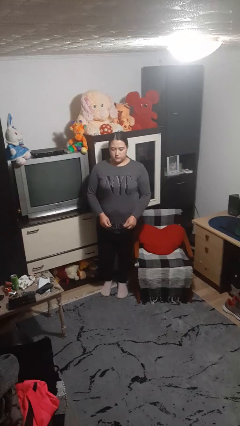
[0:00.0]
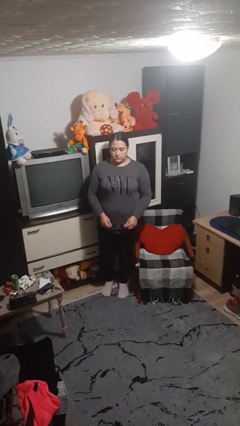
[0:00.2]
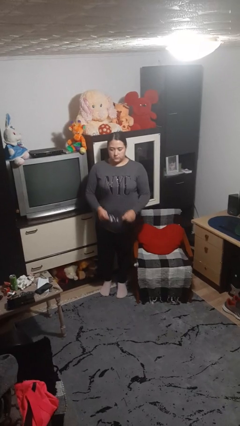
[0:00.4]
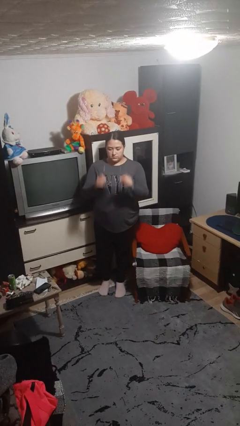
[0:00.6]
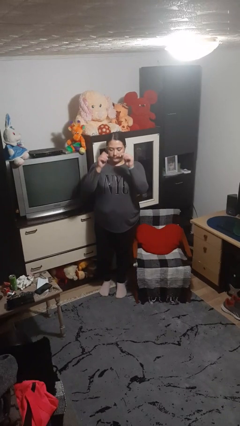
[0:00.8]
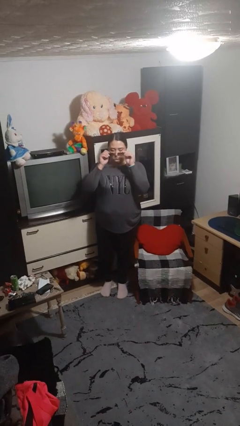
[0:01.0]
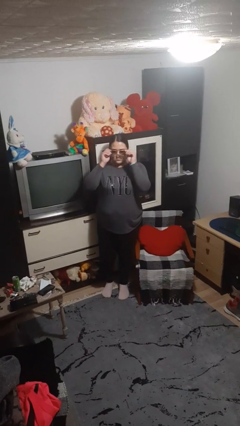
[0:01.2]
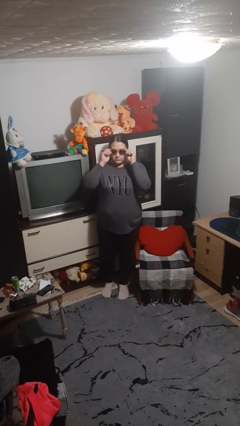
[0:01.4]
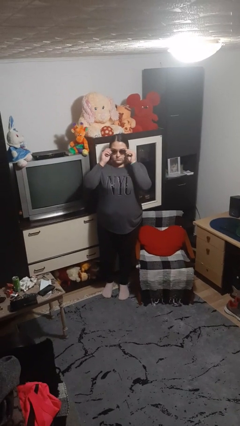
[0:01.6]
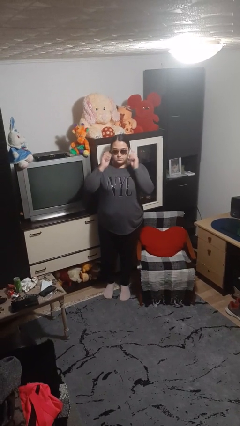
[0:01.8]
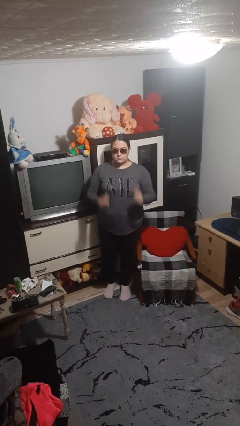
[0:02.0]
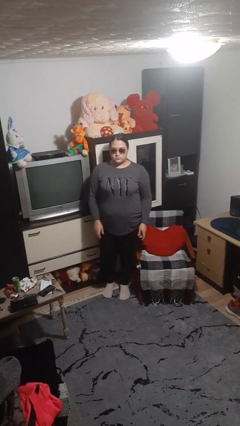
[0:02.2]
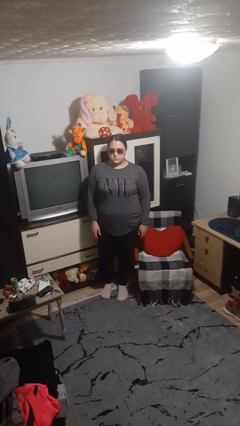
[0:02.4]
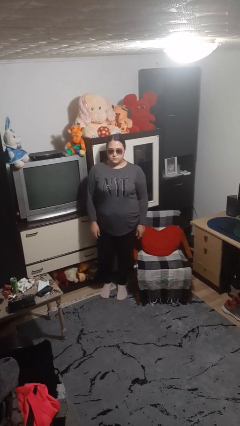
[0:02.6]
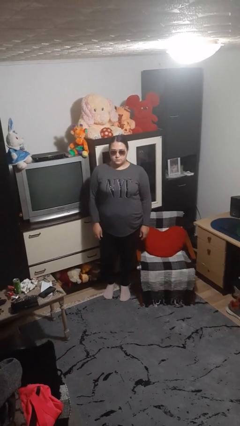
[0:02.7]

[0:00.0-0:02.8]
person puts on sunglasses

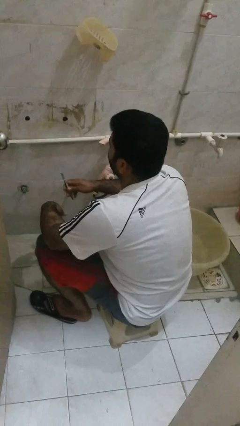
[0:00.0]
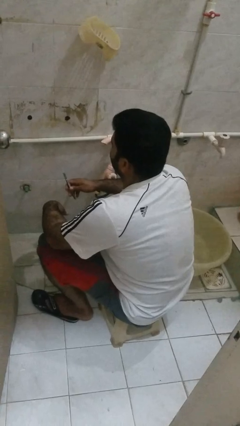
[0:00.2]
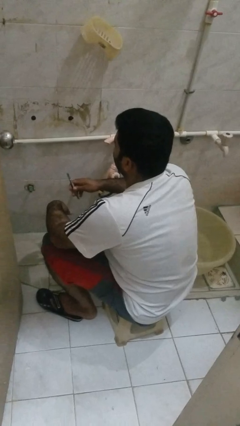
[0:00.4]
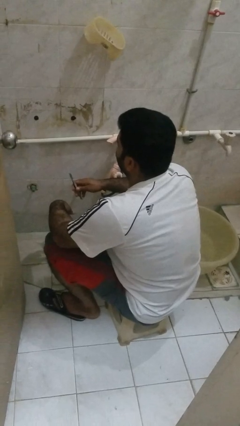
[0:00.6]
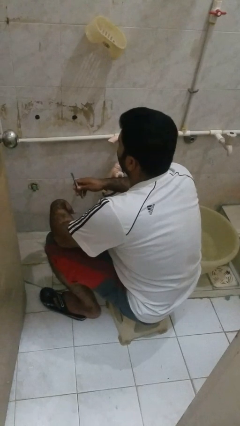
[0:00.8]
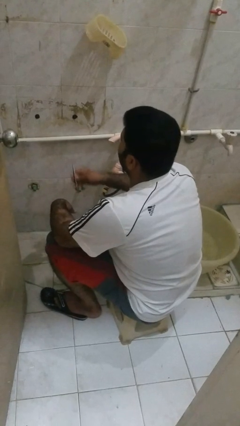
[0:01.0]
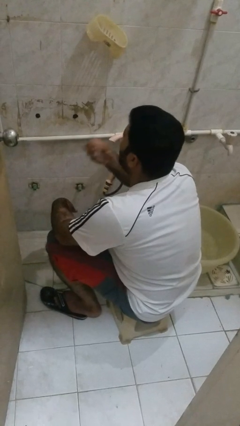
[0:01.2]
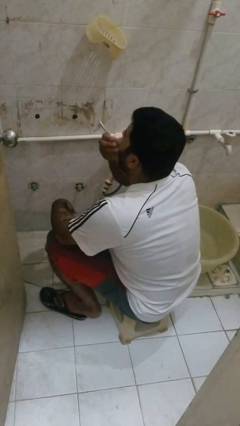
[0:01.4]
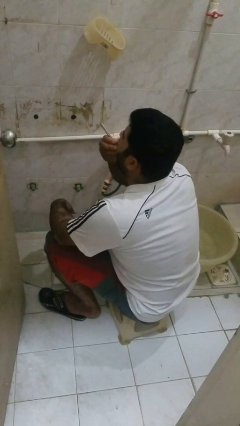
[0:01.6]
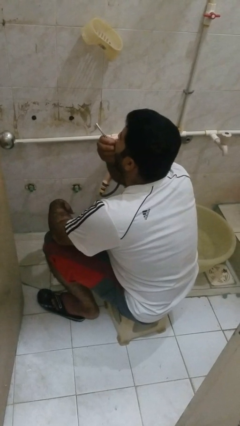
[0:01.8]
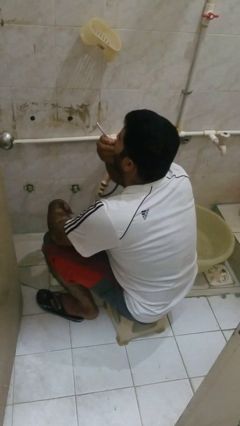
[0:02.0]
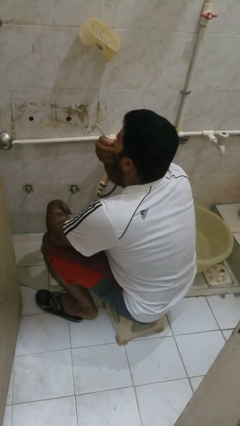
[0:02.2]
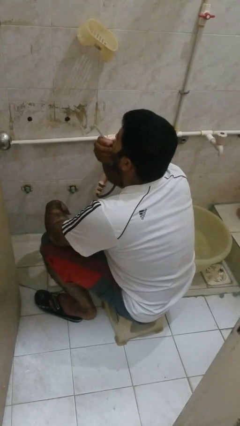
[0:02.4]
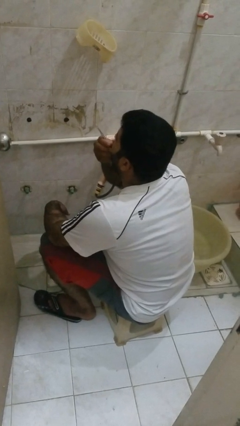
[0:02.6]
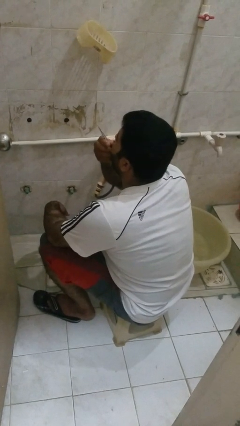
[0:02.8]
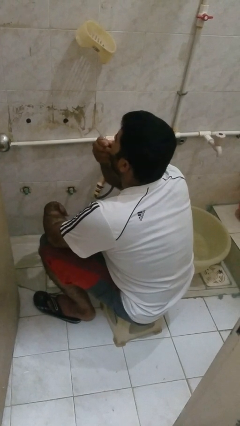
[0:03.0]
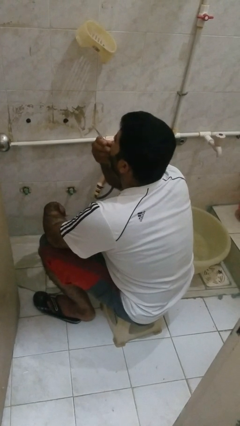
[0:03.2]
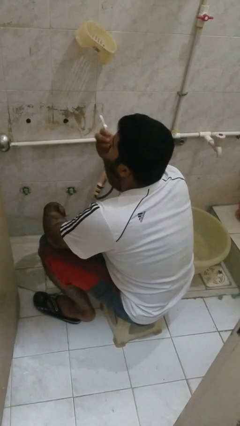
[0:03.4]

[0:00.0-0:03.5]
person flosses

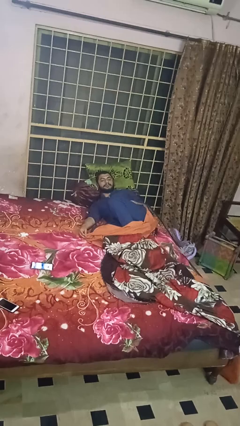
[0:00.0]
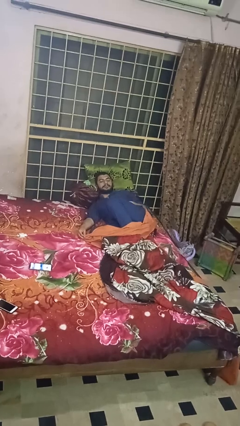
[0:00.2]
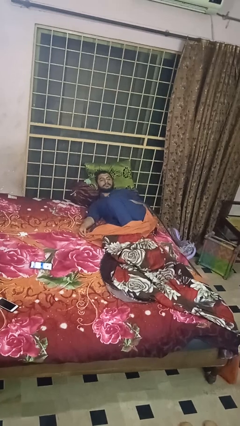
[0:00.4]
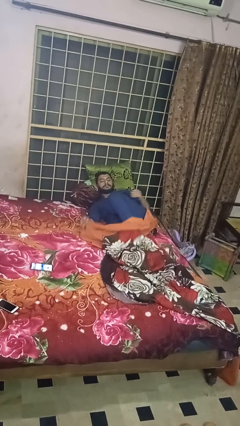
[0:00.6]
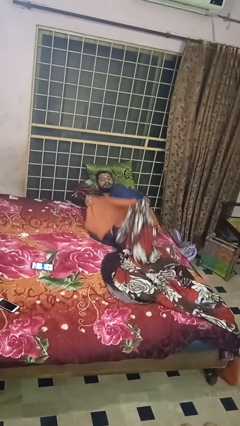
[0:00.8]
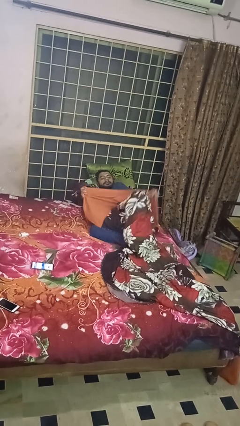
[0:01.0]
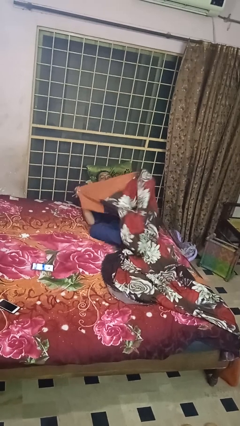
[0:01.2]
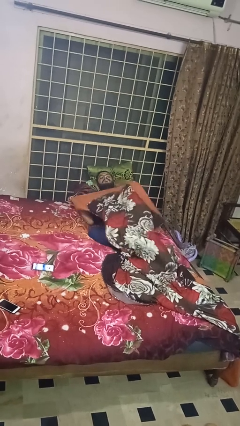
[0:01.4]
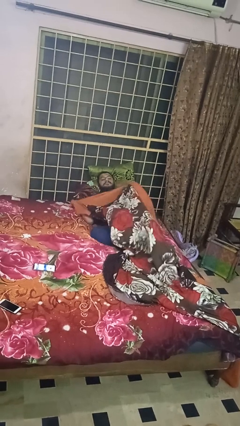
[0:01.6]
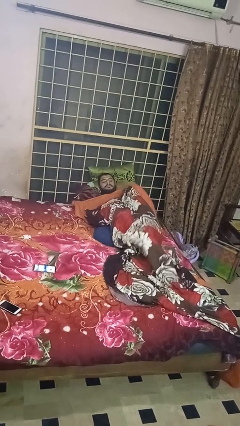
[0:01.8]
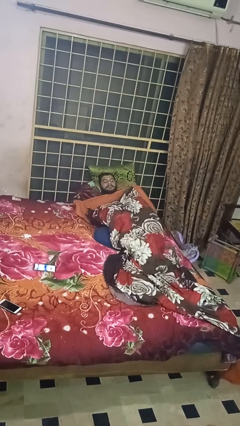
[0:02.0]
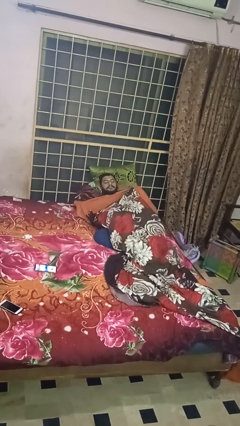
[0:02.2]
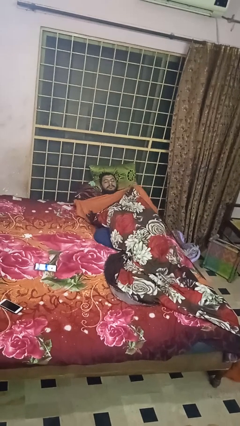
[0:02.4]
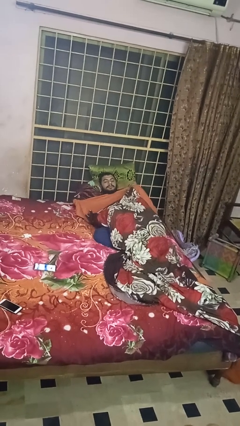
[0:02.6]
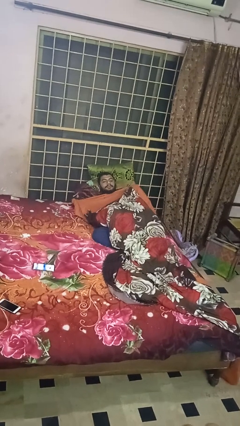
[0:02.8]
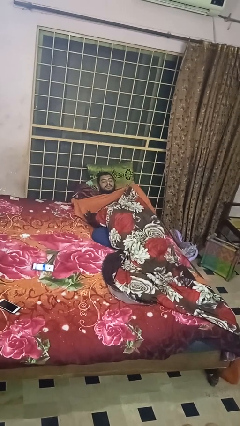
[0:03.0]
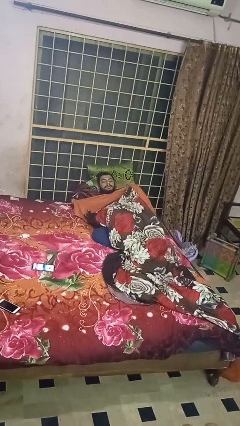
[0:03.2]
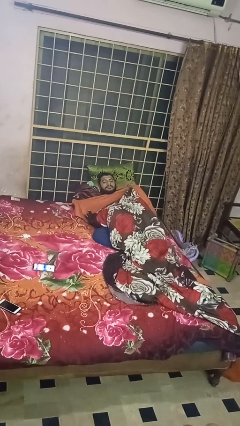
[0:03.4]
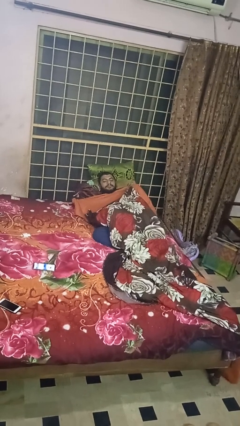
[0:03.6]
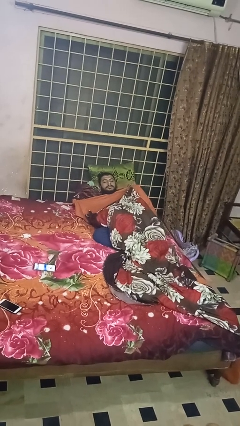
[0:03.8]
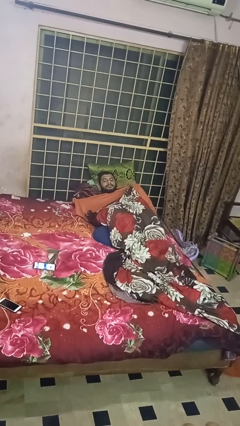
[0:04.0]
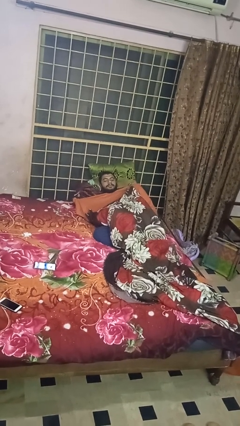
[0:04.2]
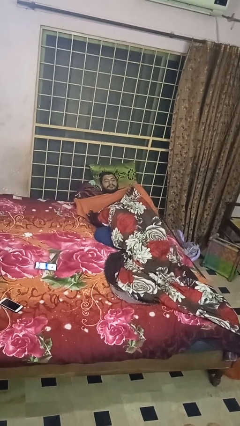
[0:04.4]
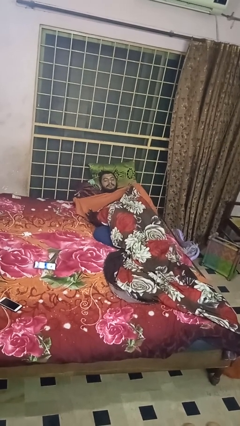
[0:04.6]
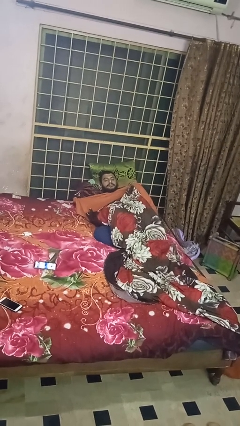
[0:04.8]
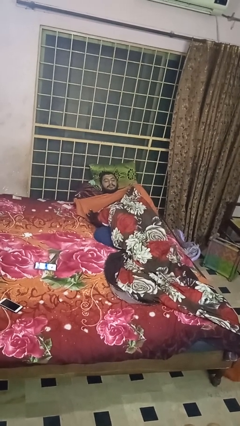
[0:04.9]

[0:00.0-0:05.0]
person covers with bedsheets

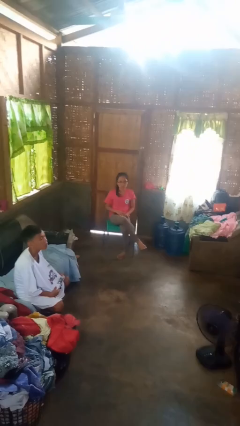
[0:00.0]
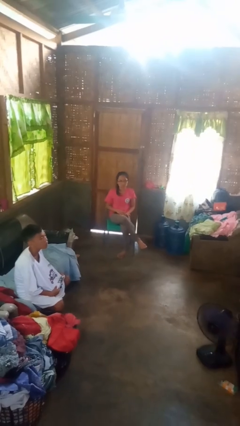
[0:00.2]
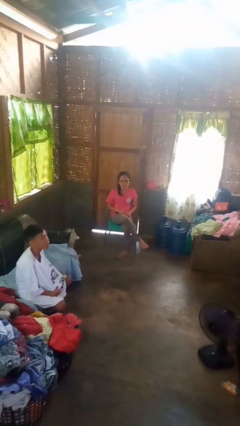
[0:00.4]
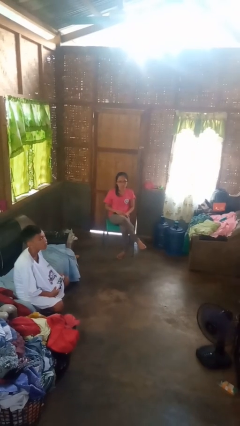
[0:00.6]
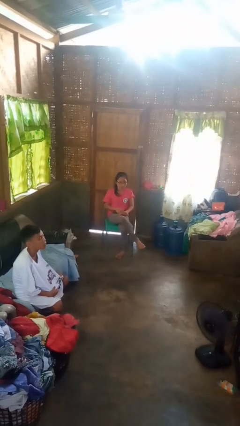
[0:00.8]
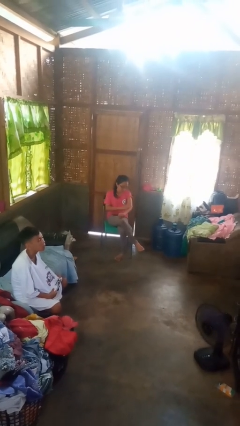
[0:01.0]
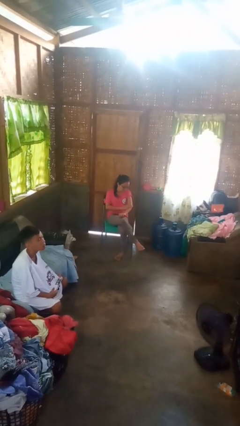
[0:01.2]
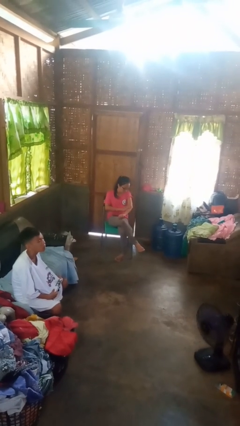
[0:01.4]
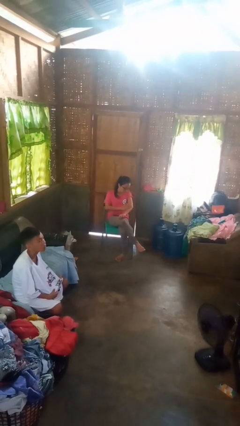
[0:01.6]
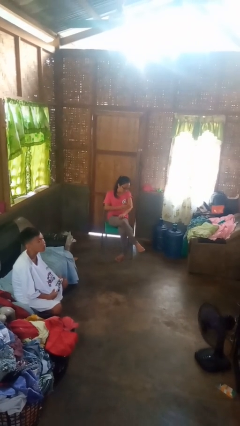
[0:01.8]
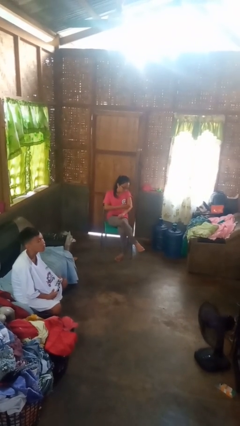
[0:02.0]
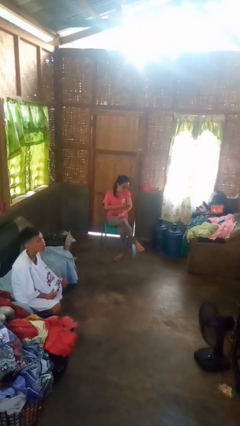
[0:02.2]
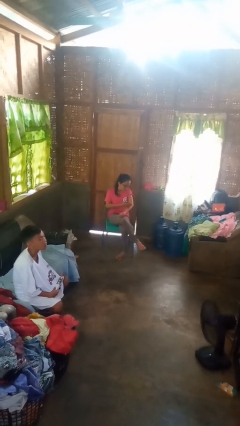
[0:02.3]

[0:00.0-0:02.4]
person swats bug

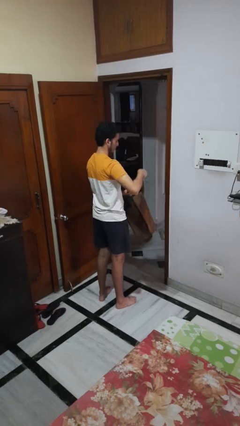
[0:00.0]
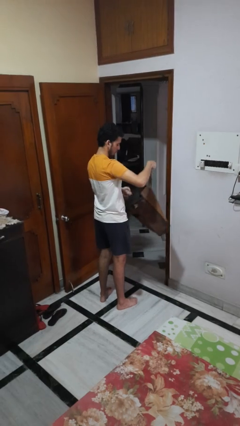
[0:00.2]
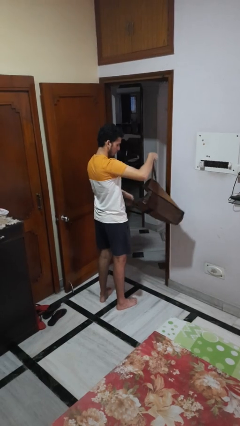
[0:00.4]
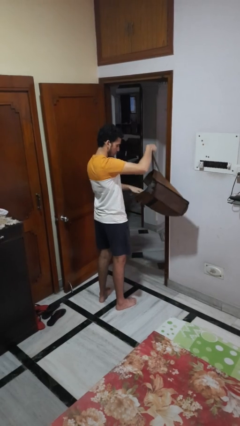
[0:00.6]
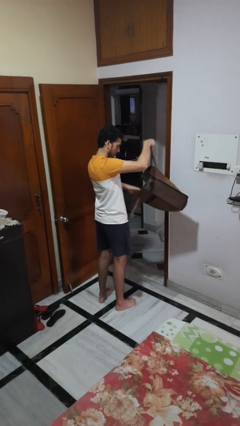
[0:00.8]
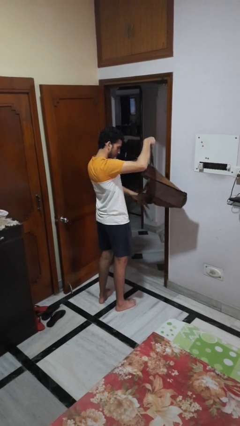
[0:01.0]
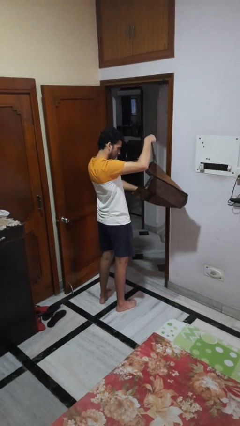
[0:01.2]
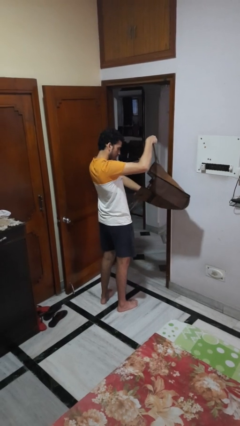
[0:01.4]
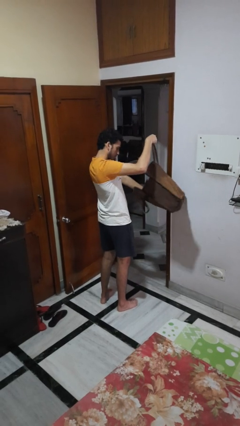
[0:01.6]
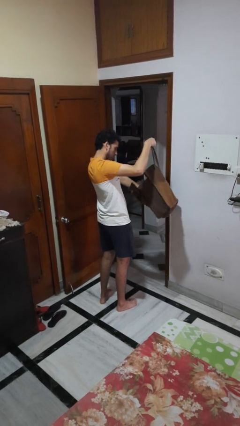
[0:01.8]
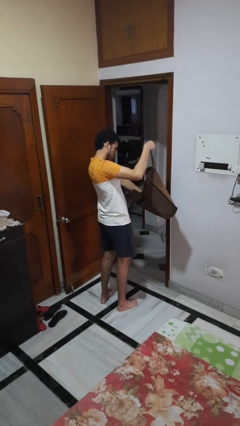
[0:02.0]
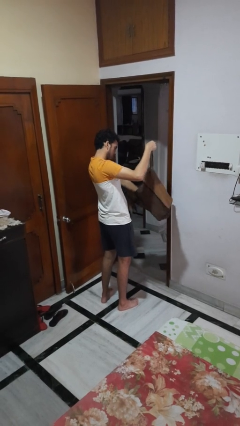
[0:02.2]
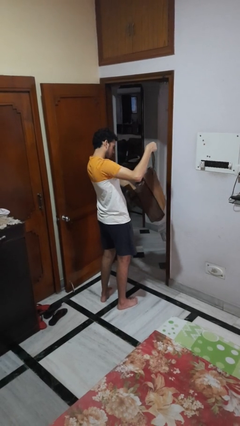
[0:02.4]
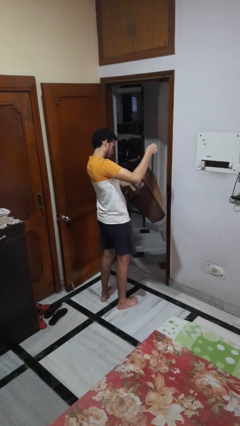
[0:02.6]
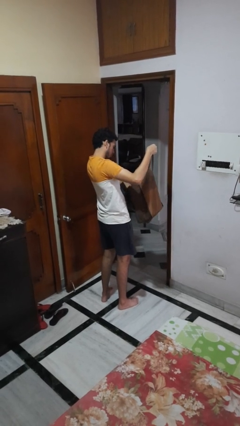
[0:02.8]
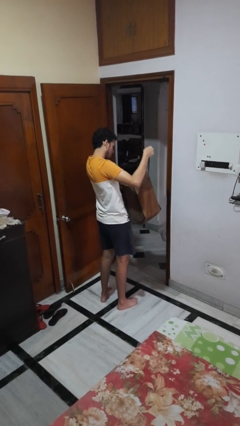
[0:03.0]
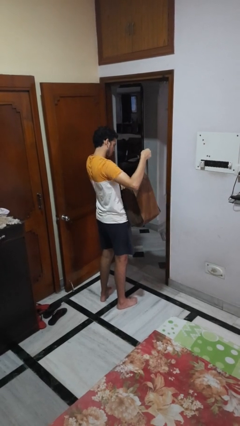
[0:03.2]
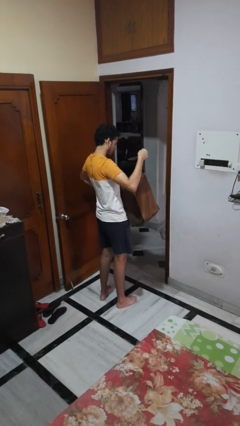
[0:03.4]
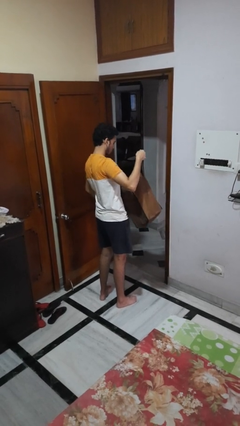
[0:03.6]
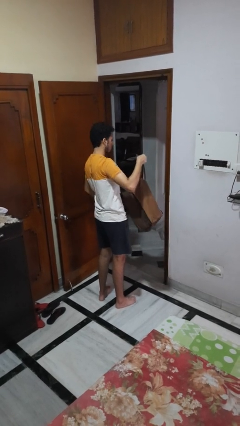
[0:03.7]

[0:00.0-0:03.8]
person searches in bag

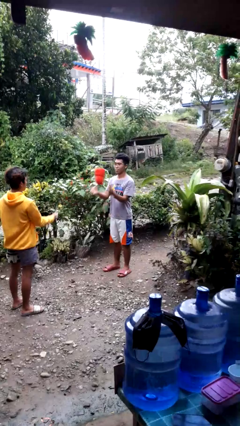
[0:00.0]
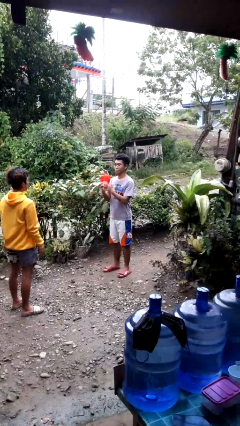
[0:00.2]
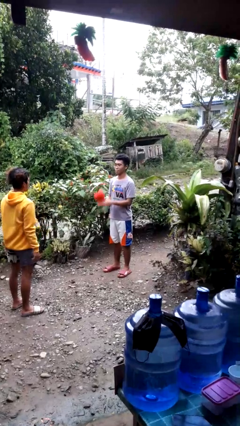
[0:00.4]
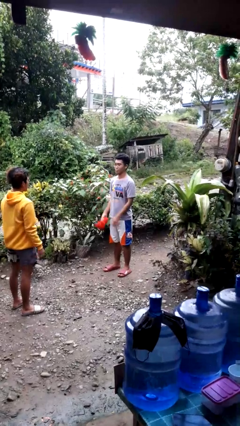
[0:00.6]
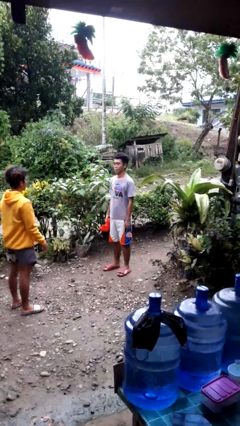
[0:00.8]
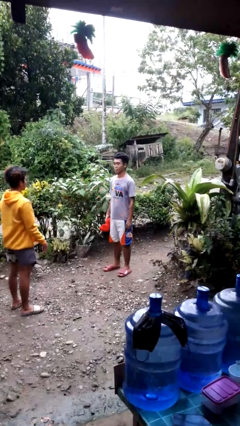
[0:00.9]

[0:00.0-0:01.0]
person catches object from person
